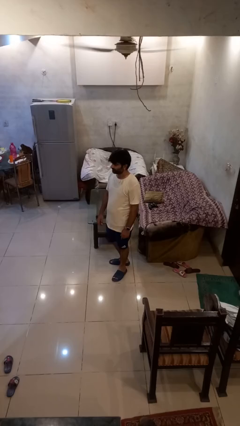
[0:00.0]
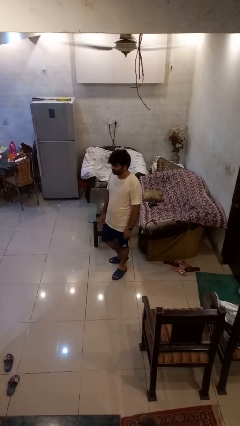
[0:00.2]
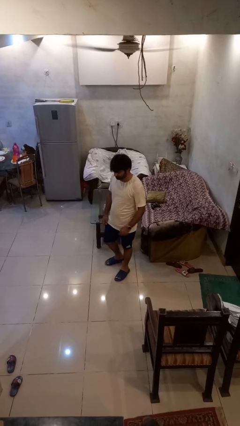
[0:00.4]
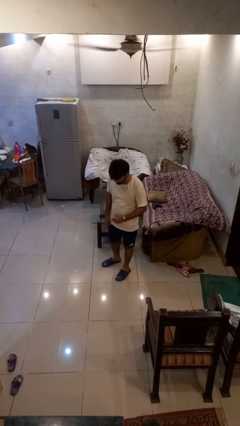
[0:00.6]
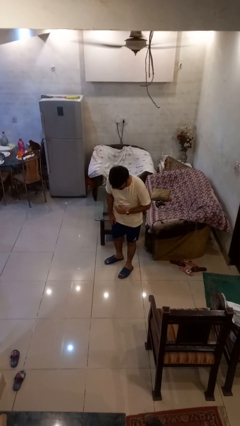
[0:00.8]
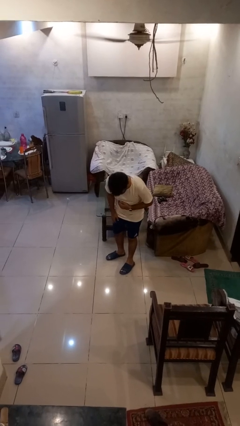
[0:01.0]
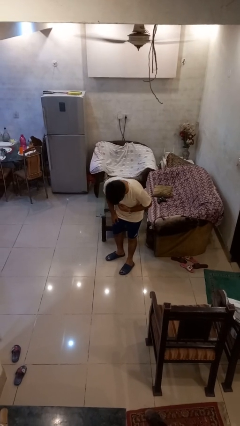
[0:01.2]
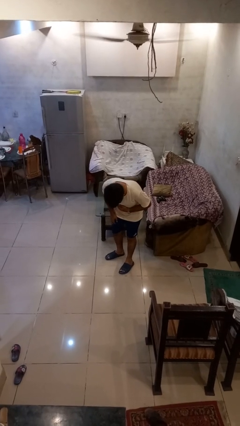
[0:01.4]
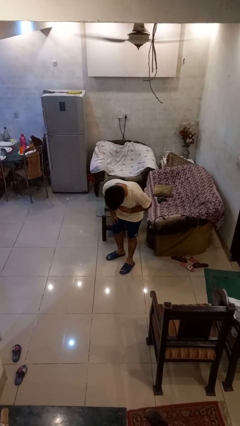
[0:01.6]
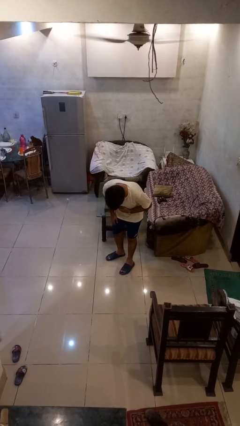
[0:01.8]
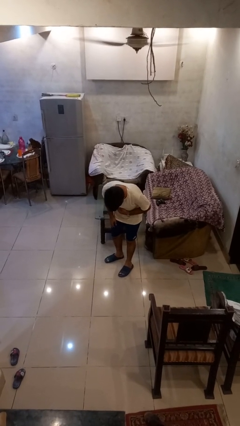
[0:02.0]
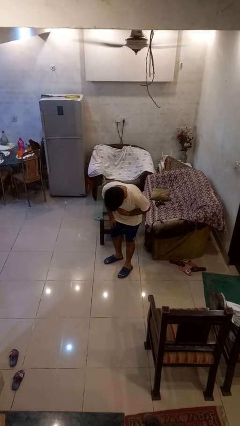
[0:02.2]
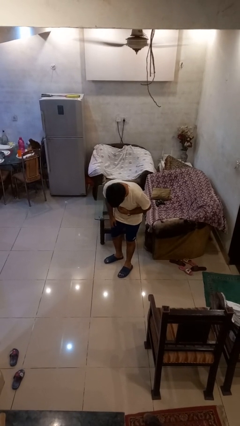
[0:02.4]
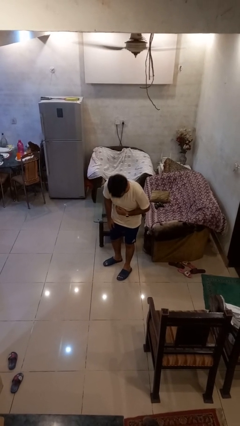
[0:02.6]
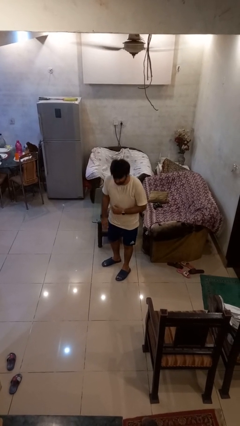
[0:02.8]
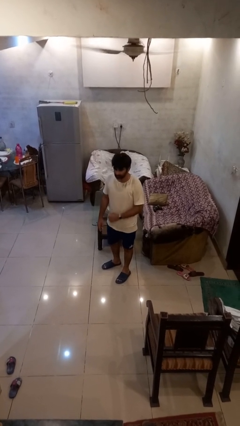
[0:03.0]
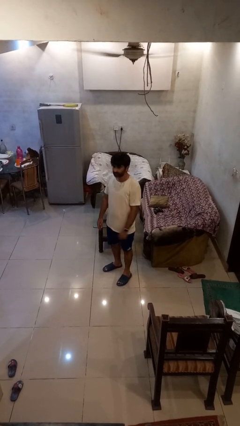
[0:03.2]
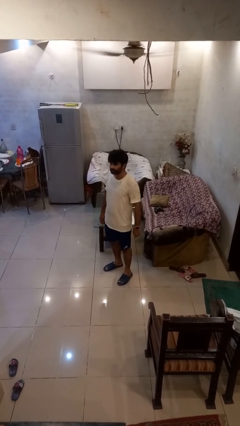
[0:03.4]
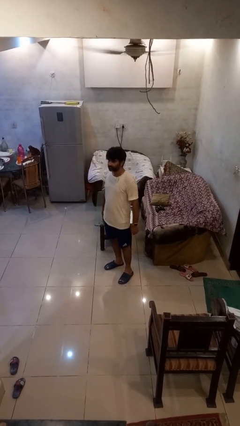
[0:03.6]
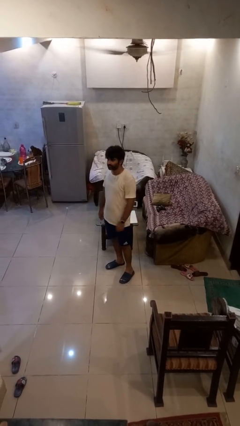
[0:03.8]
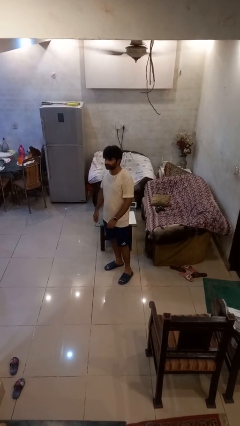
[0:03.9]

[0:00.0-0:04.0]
person bows

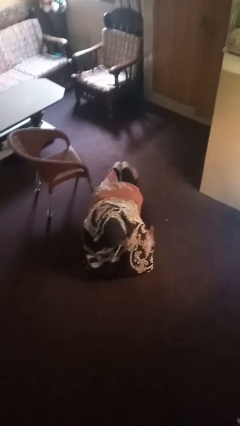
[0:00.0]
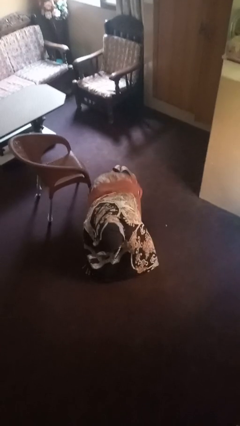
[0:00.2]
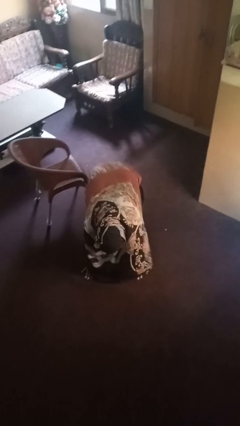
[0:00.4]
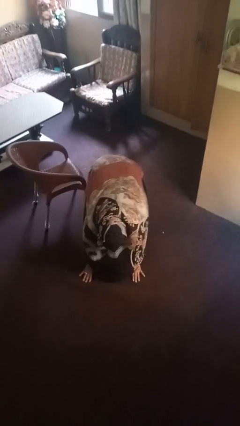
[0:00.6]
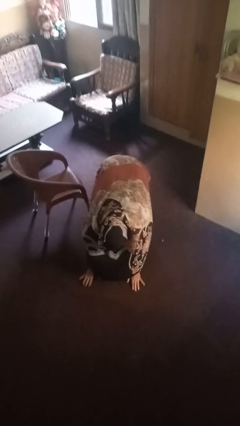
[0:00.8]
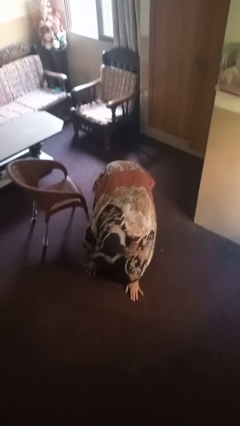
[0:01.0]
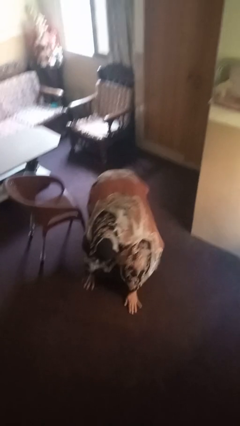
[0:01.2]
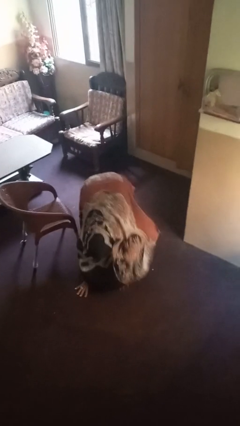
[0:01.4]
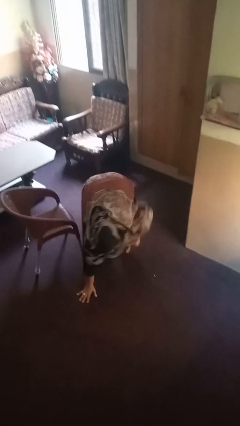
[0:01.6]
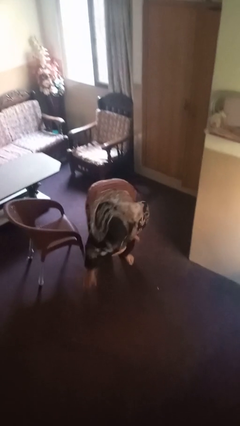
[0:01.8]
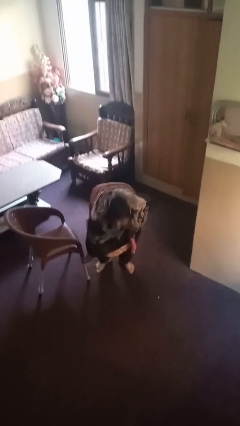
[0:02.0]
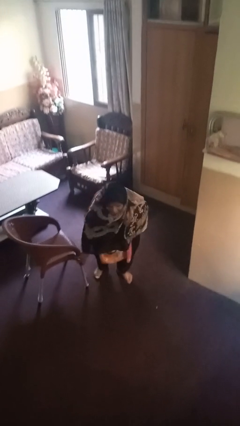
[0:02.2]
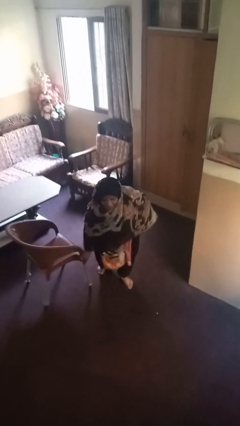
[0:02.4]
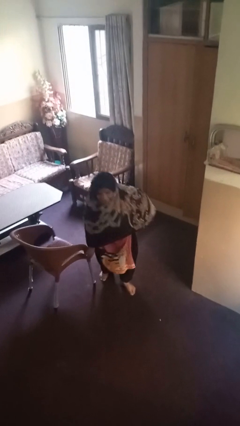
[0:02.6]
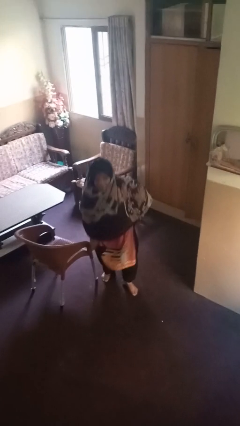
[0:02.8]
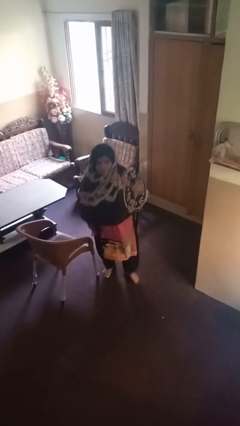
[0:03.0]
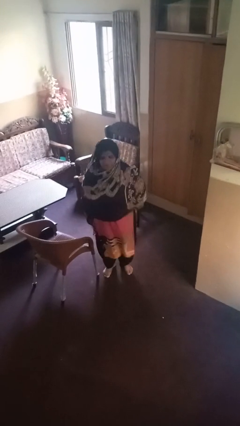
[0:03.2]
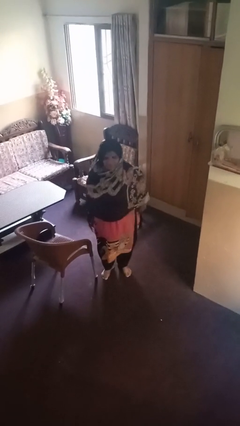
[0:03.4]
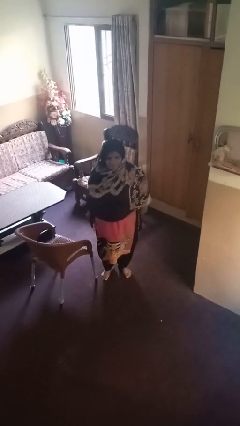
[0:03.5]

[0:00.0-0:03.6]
person stands up from floor

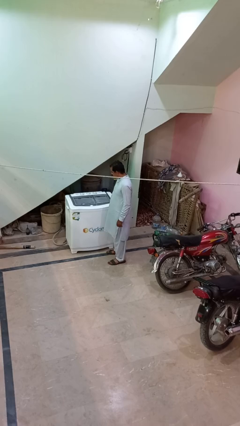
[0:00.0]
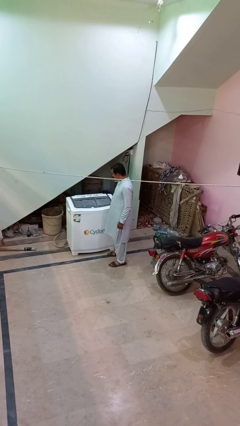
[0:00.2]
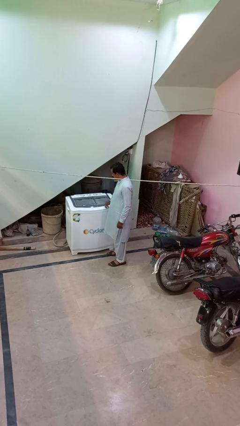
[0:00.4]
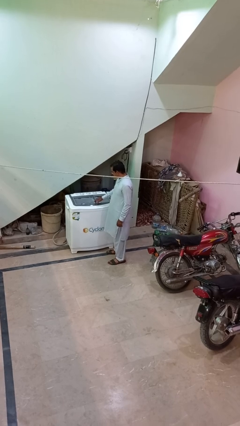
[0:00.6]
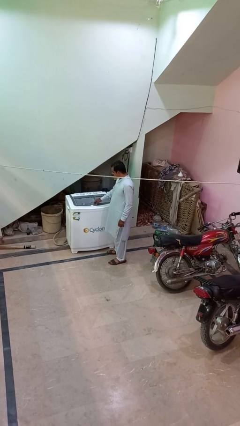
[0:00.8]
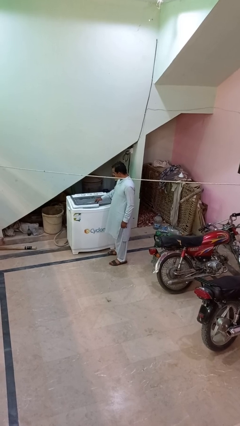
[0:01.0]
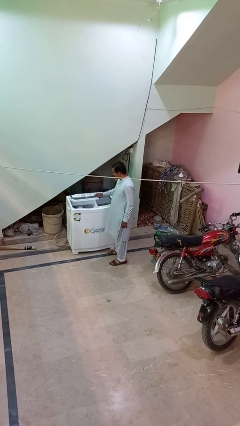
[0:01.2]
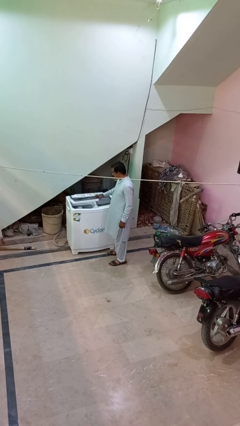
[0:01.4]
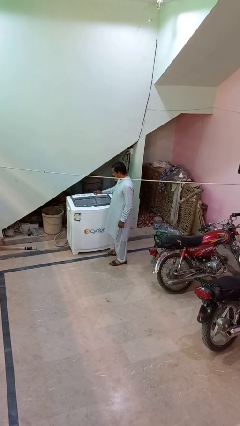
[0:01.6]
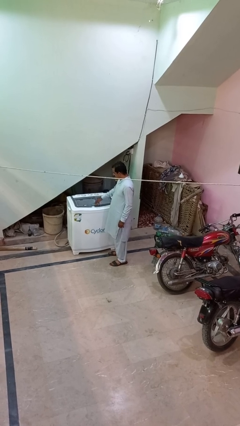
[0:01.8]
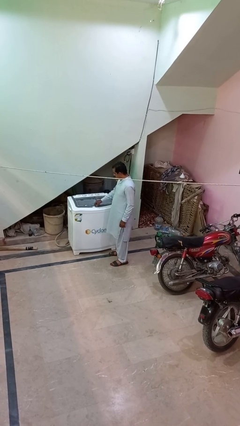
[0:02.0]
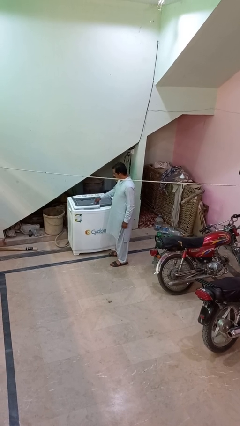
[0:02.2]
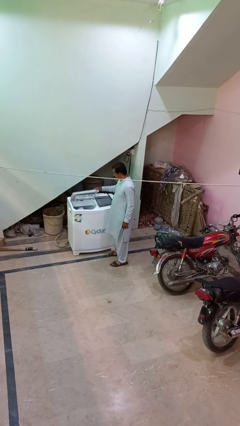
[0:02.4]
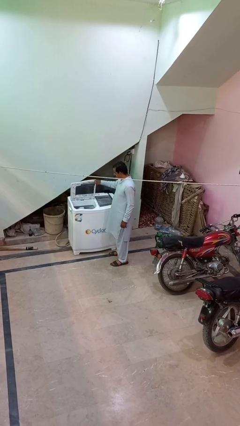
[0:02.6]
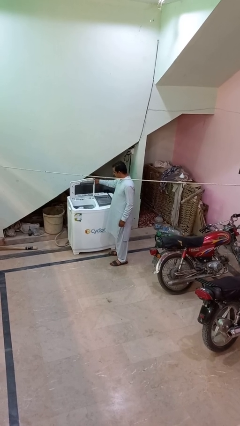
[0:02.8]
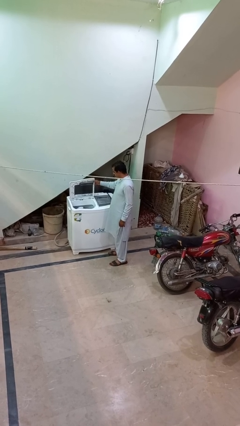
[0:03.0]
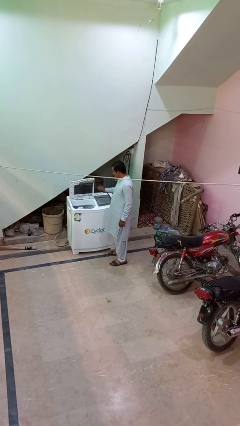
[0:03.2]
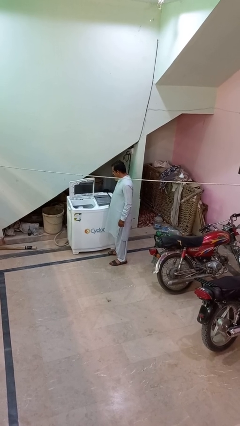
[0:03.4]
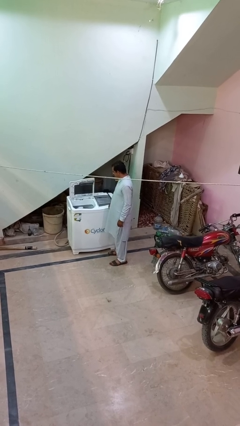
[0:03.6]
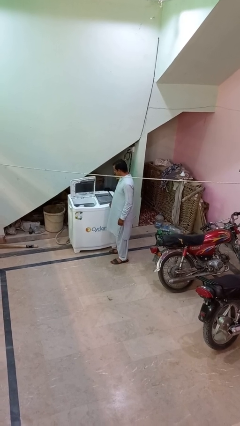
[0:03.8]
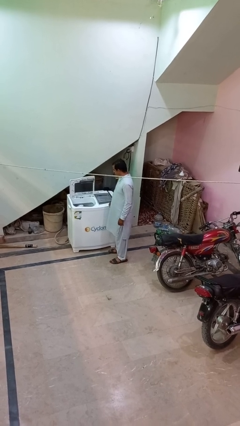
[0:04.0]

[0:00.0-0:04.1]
person opens clothes washer

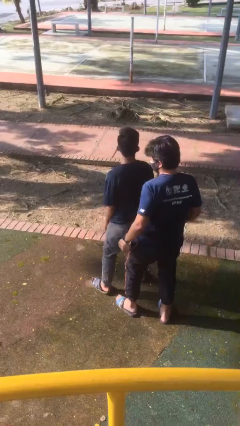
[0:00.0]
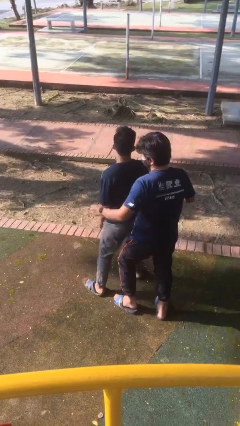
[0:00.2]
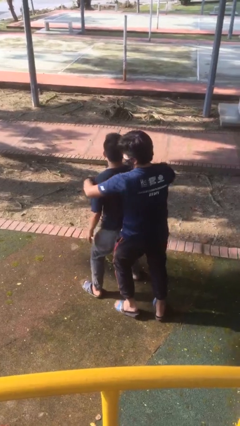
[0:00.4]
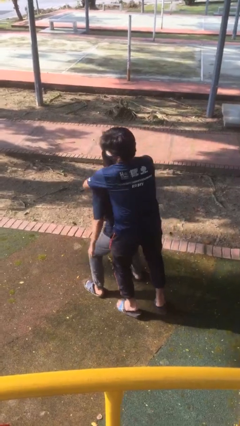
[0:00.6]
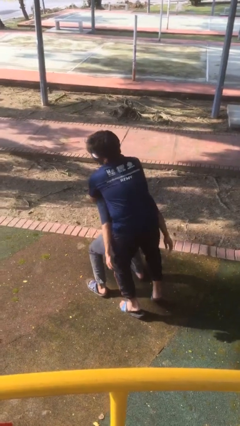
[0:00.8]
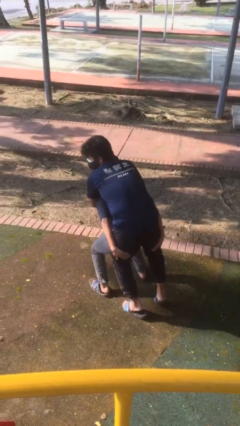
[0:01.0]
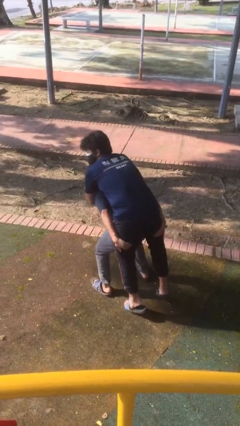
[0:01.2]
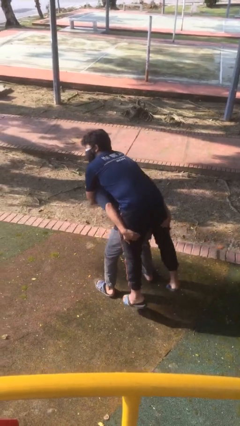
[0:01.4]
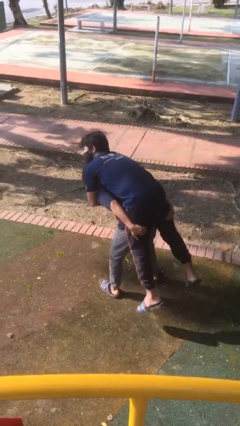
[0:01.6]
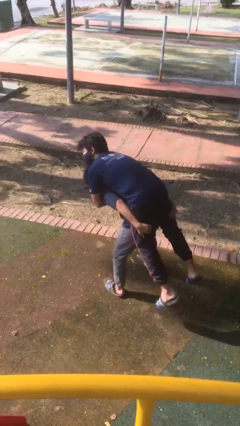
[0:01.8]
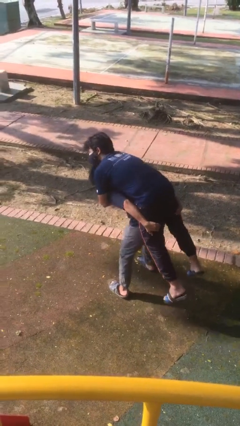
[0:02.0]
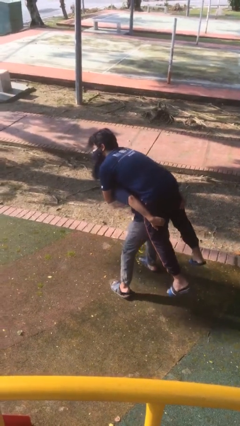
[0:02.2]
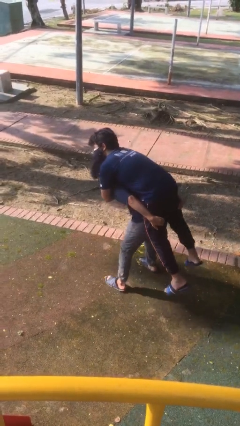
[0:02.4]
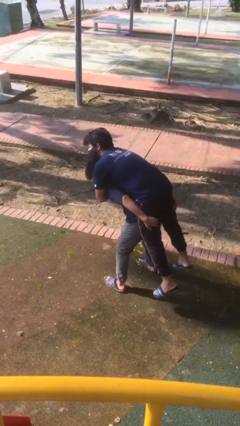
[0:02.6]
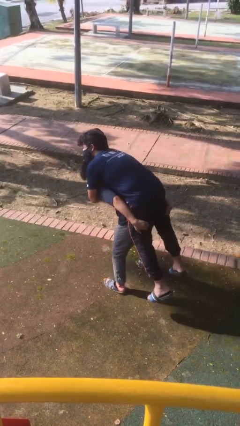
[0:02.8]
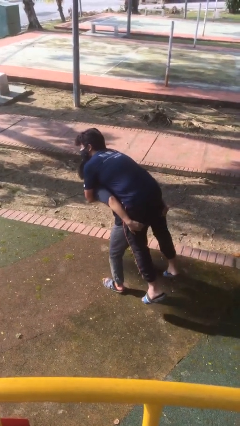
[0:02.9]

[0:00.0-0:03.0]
person carries person over shoulder

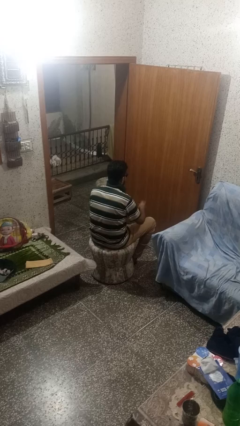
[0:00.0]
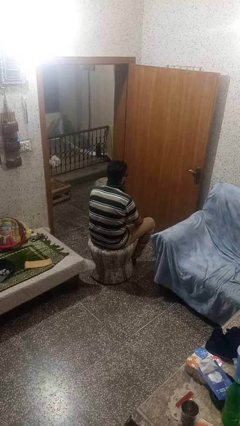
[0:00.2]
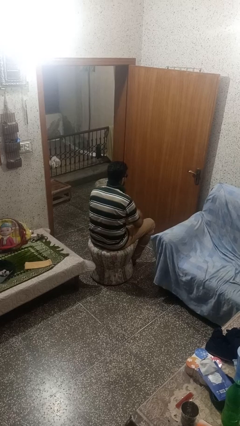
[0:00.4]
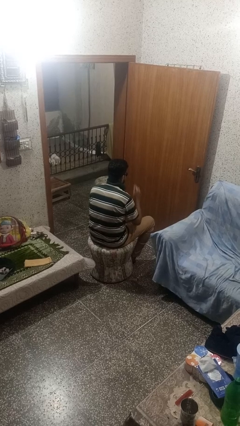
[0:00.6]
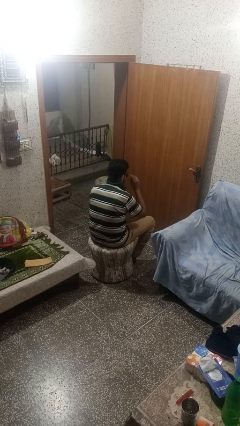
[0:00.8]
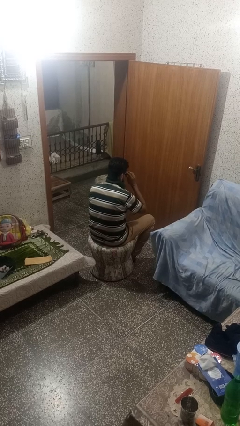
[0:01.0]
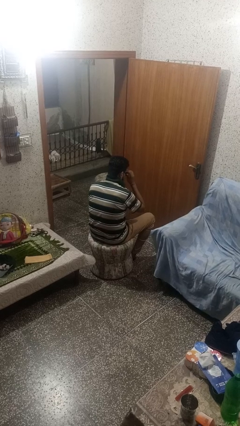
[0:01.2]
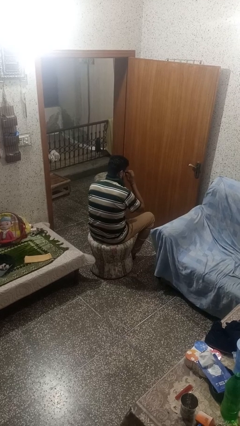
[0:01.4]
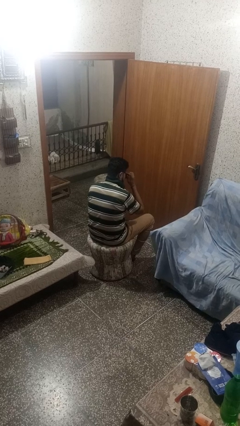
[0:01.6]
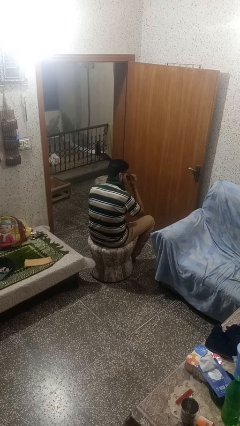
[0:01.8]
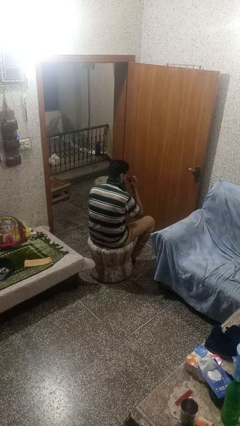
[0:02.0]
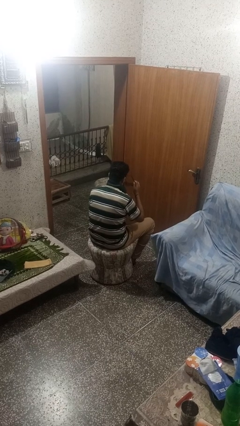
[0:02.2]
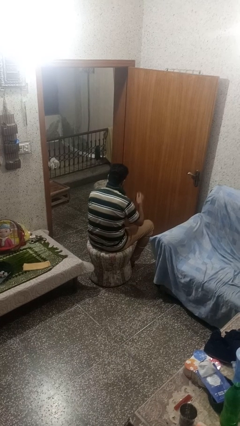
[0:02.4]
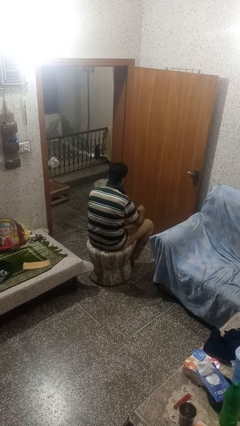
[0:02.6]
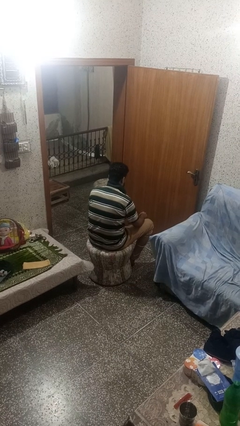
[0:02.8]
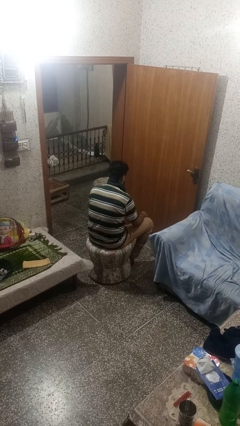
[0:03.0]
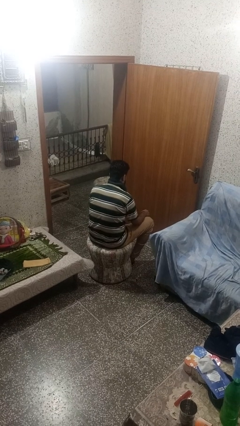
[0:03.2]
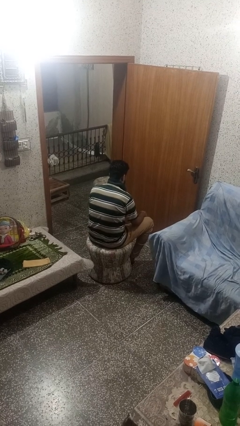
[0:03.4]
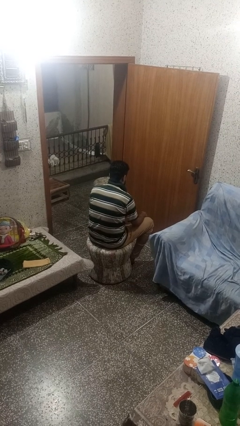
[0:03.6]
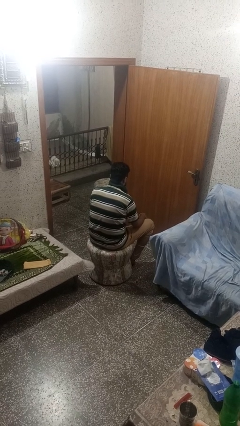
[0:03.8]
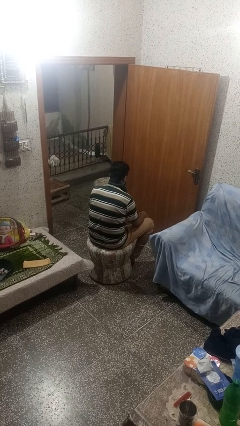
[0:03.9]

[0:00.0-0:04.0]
person takes off glasses
